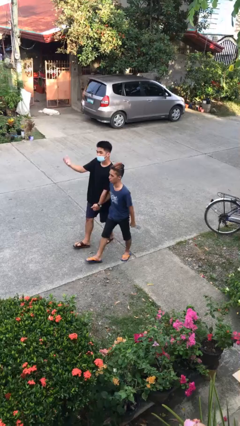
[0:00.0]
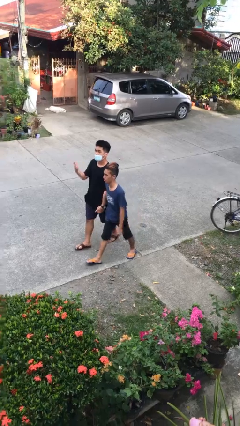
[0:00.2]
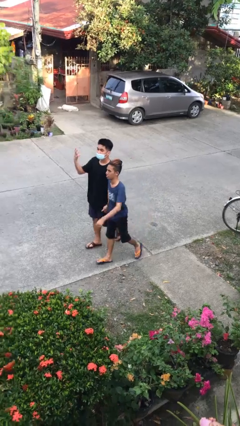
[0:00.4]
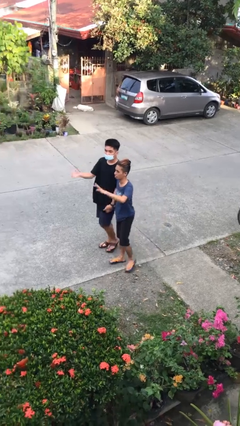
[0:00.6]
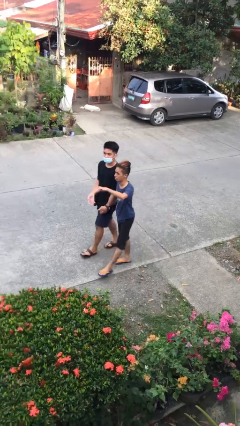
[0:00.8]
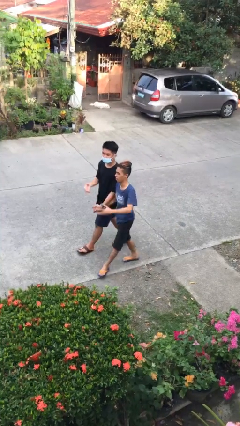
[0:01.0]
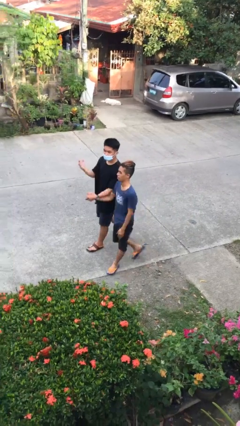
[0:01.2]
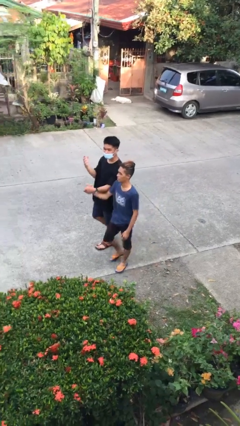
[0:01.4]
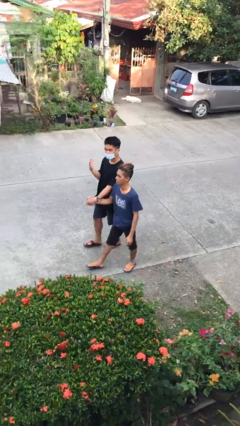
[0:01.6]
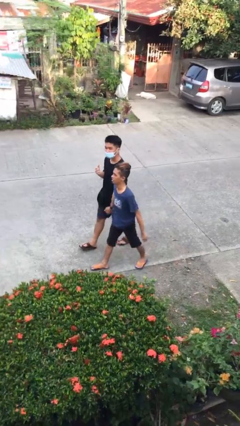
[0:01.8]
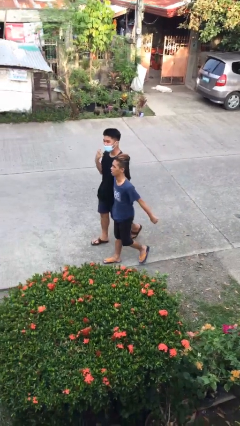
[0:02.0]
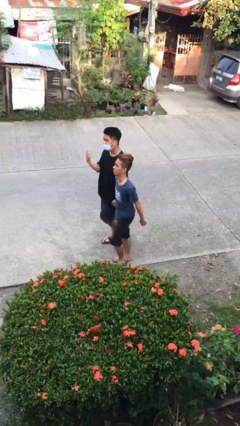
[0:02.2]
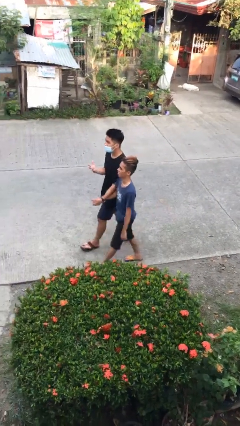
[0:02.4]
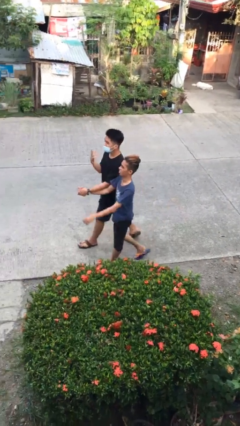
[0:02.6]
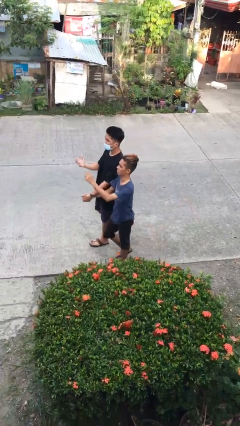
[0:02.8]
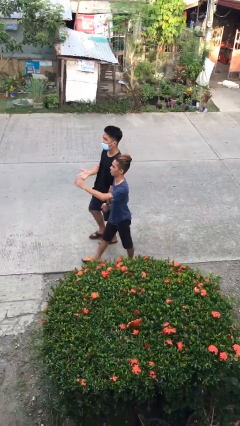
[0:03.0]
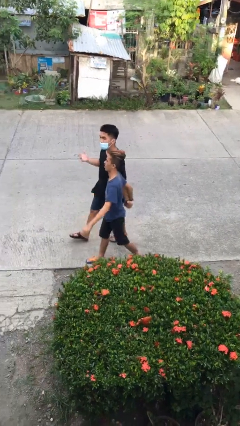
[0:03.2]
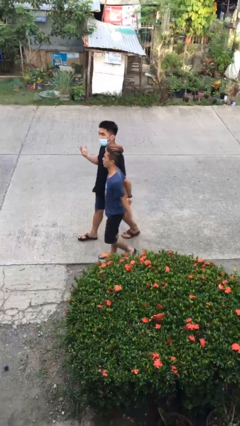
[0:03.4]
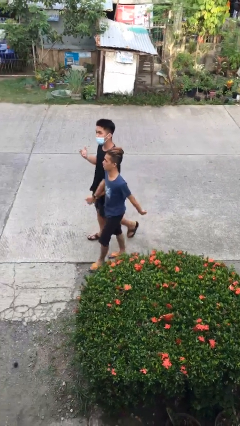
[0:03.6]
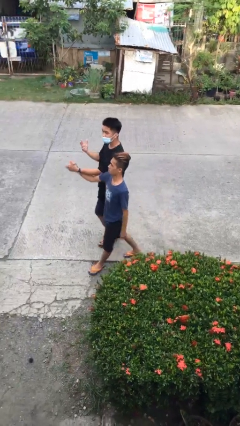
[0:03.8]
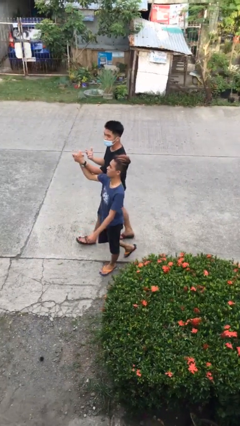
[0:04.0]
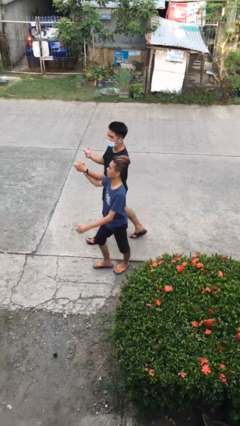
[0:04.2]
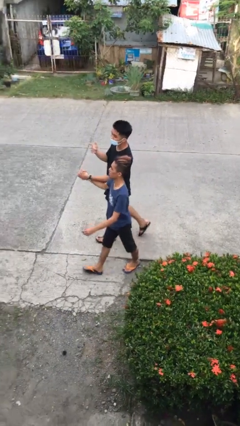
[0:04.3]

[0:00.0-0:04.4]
person holds hand

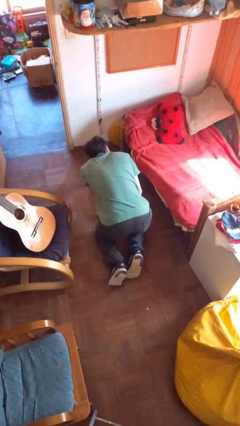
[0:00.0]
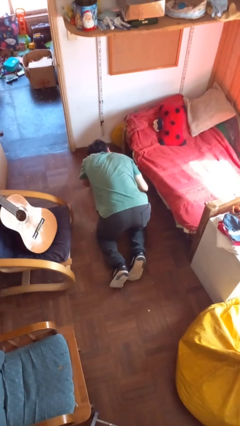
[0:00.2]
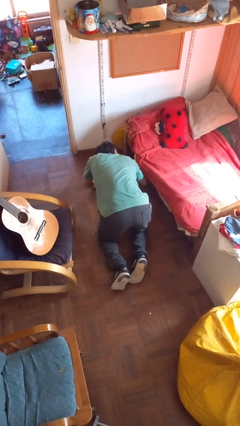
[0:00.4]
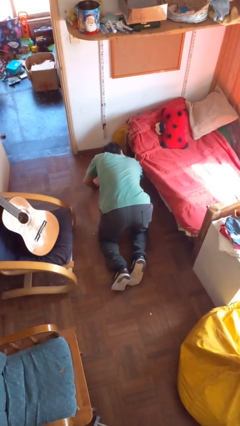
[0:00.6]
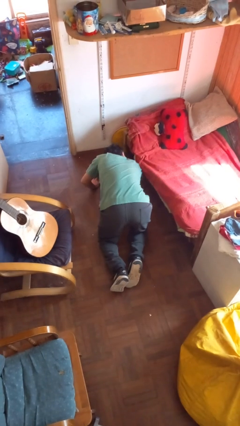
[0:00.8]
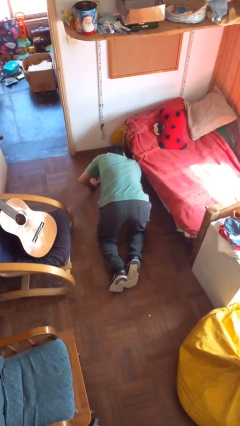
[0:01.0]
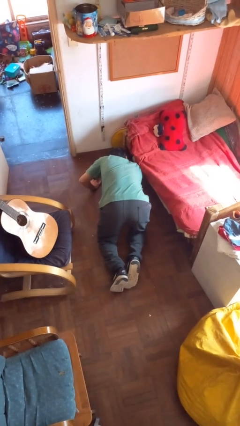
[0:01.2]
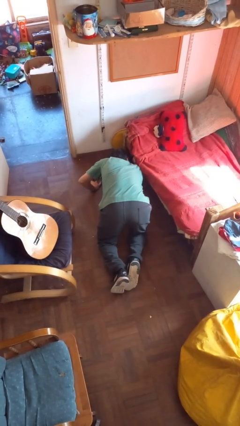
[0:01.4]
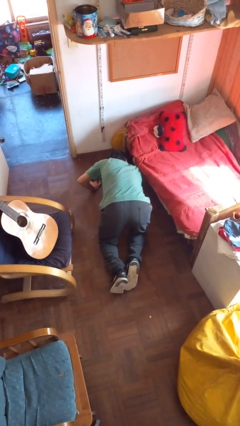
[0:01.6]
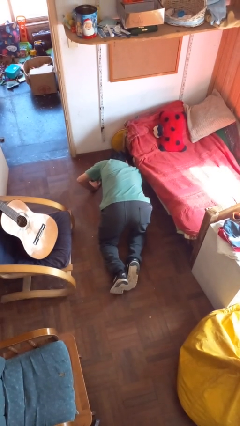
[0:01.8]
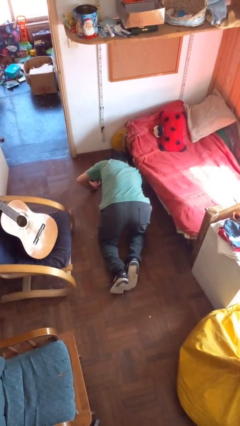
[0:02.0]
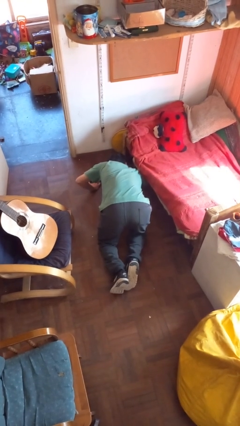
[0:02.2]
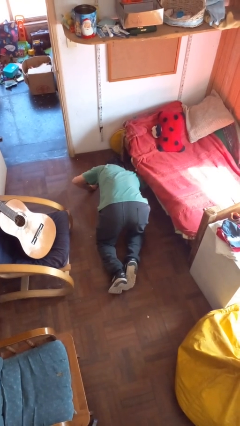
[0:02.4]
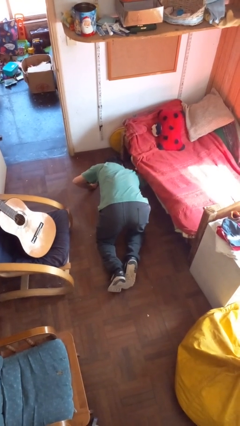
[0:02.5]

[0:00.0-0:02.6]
person searches under bed

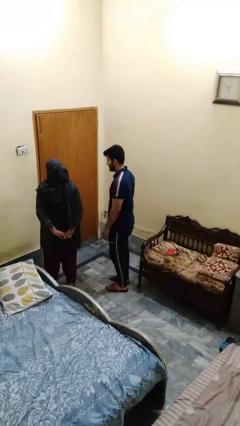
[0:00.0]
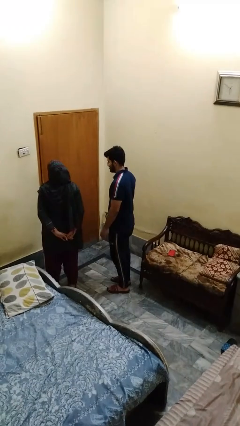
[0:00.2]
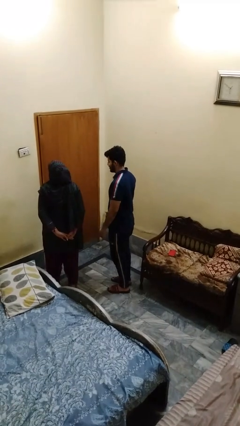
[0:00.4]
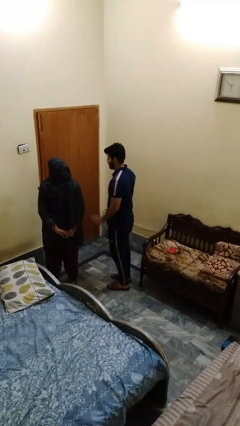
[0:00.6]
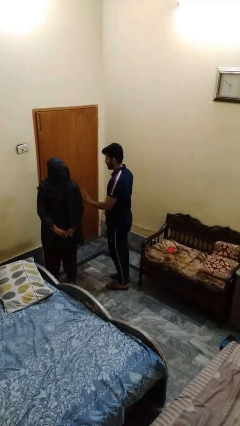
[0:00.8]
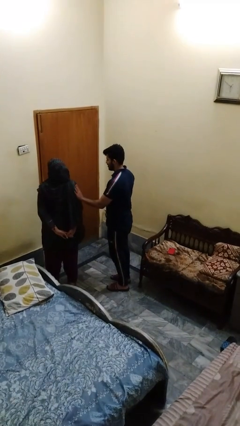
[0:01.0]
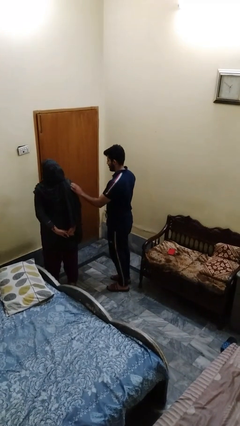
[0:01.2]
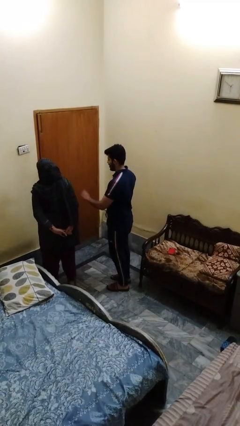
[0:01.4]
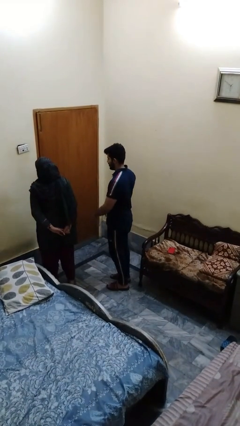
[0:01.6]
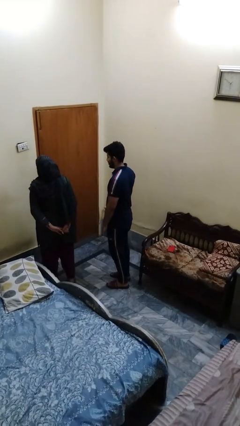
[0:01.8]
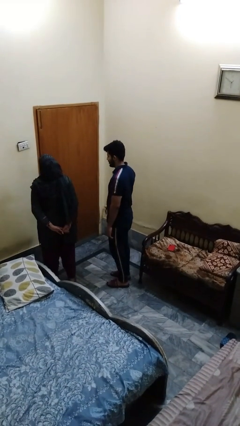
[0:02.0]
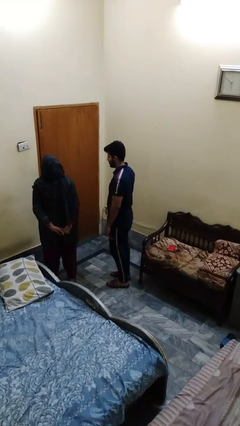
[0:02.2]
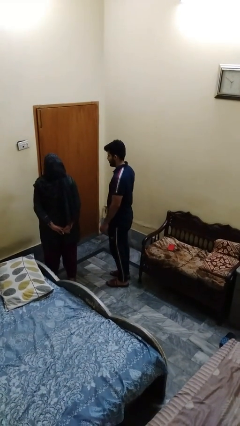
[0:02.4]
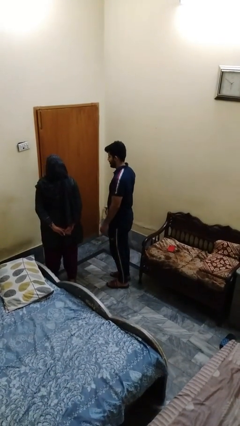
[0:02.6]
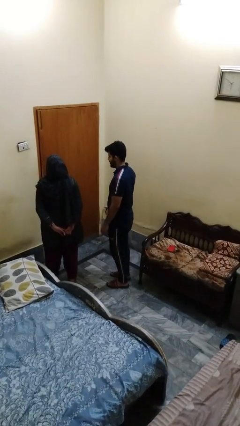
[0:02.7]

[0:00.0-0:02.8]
person shoves person

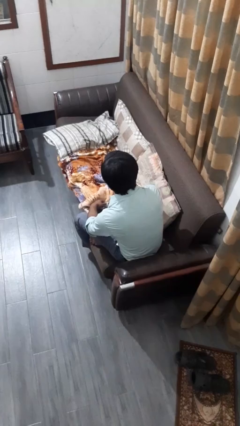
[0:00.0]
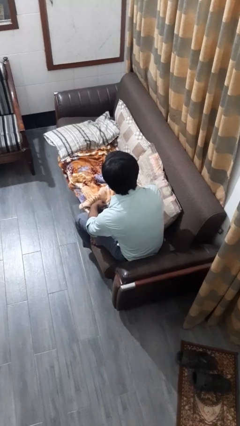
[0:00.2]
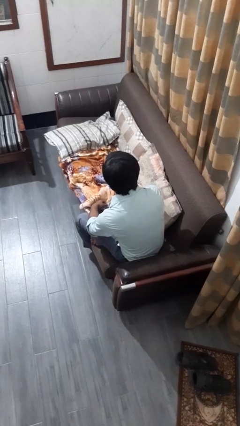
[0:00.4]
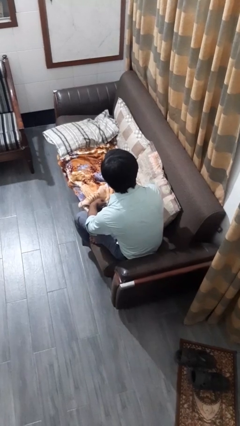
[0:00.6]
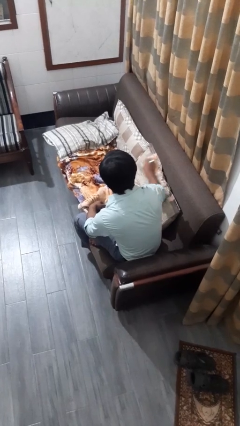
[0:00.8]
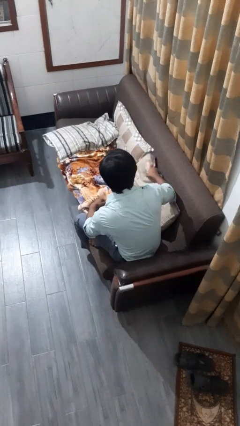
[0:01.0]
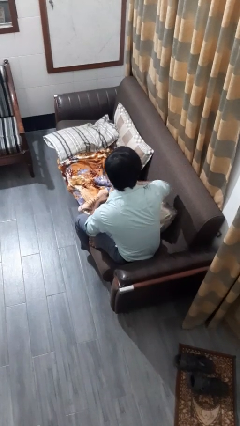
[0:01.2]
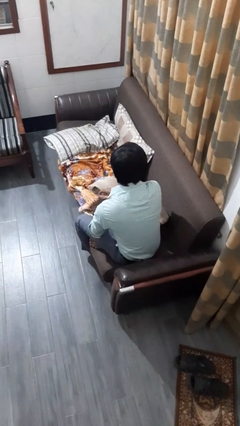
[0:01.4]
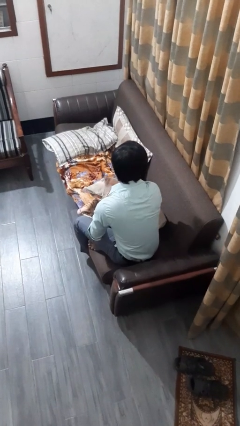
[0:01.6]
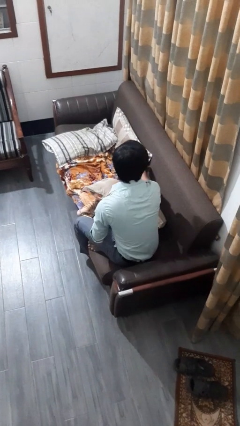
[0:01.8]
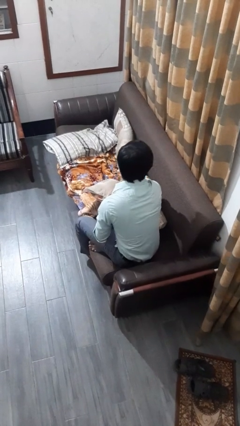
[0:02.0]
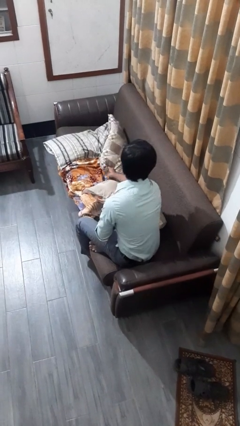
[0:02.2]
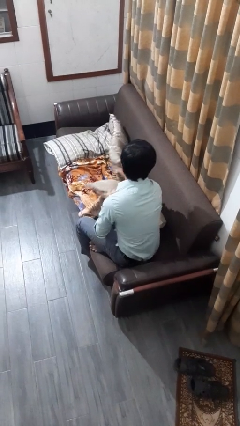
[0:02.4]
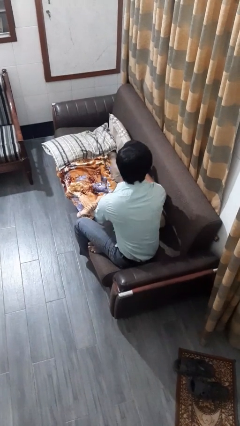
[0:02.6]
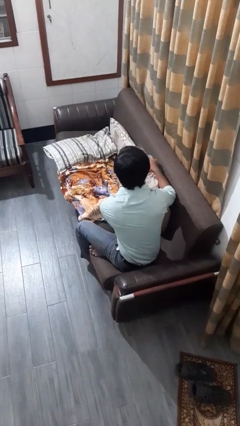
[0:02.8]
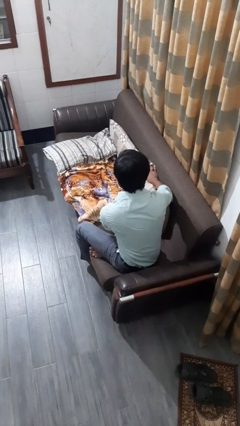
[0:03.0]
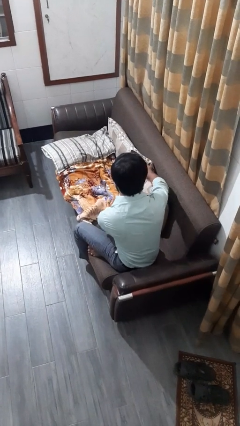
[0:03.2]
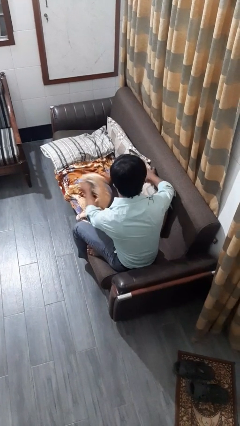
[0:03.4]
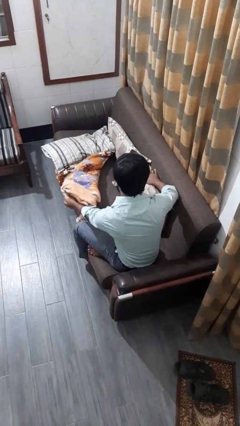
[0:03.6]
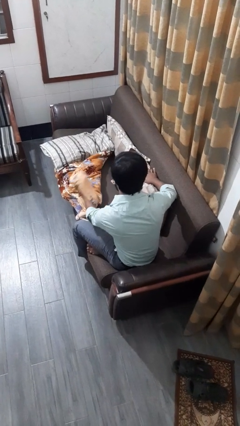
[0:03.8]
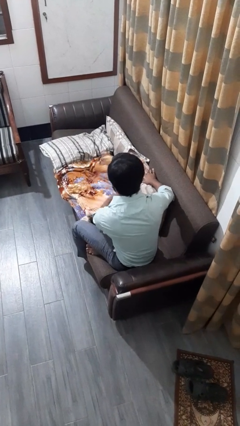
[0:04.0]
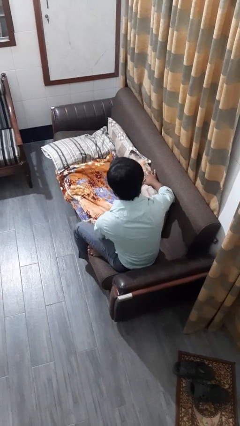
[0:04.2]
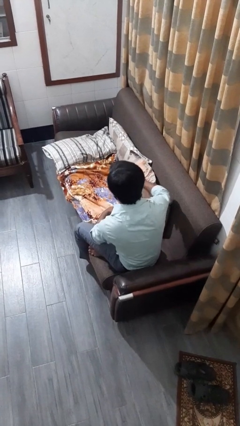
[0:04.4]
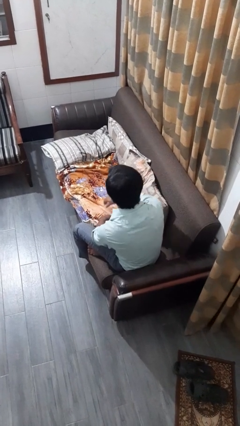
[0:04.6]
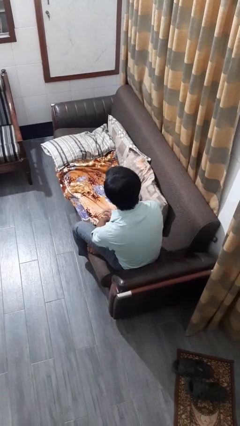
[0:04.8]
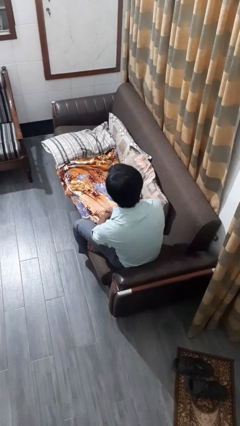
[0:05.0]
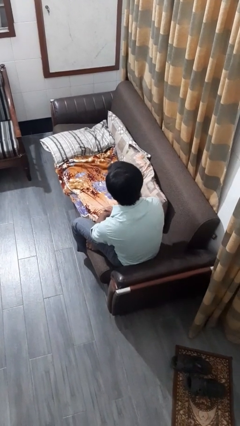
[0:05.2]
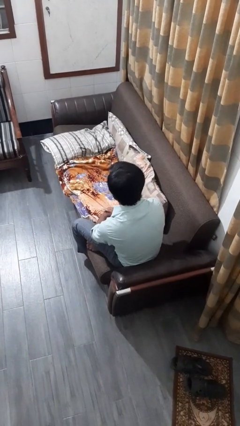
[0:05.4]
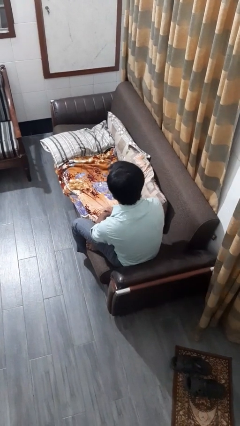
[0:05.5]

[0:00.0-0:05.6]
person searches in couch

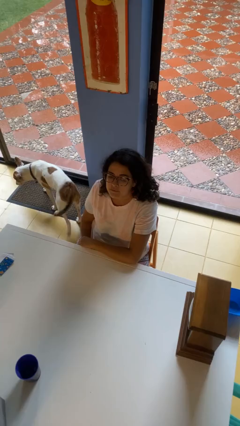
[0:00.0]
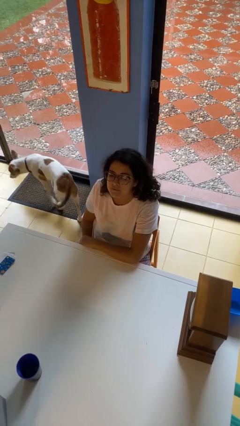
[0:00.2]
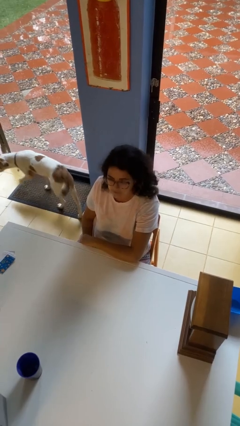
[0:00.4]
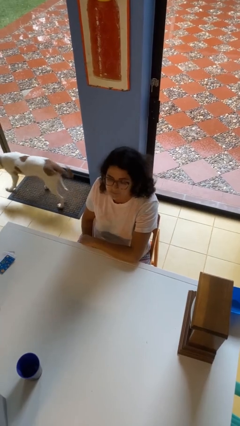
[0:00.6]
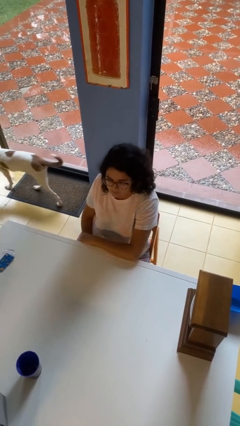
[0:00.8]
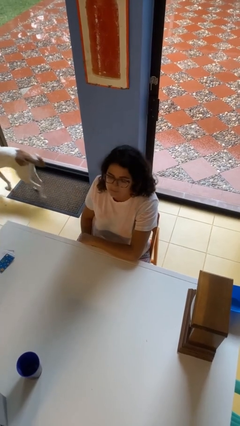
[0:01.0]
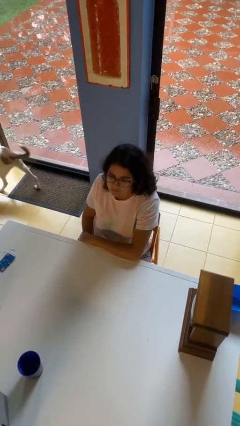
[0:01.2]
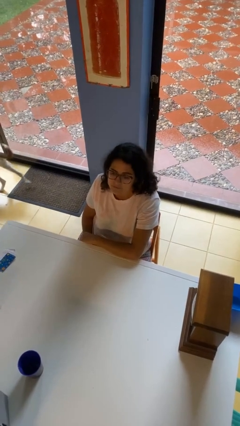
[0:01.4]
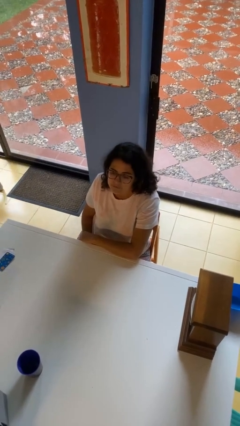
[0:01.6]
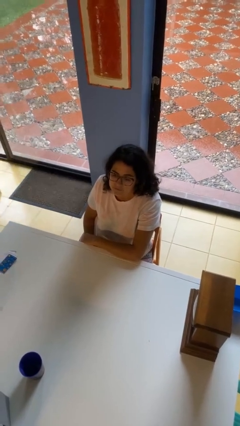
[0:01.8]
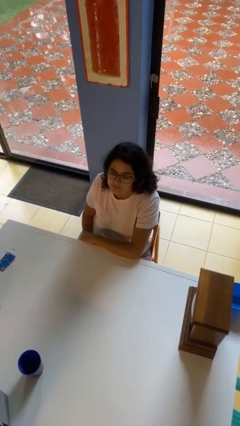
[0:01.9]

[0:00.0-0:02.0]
person nods head
